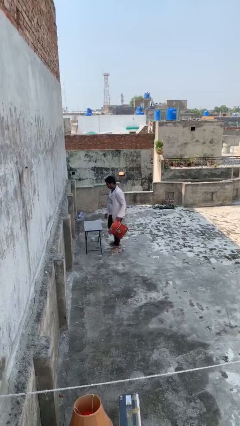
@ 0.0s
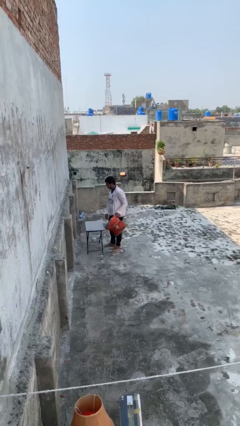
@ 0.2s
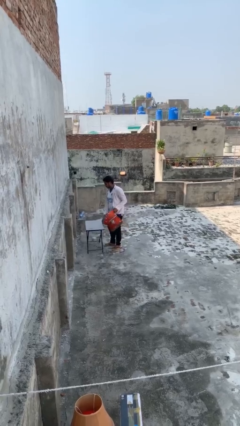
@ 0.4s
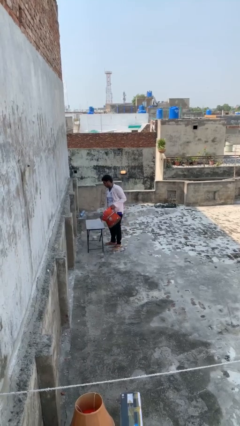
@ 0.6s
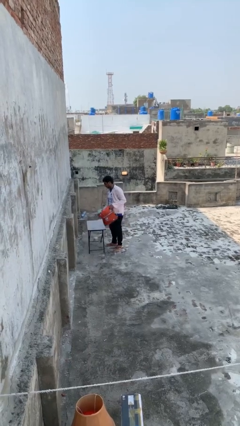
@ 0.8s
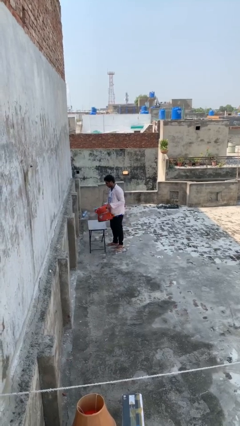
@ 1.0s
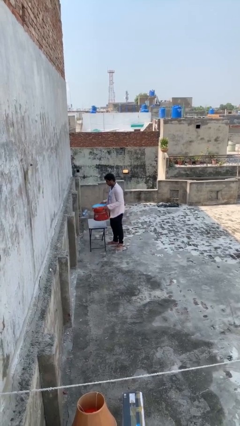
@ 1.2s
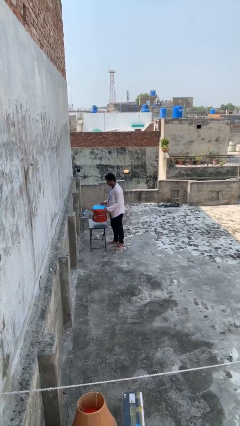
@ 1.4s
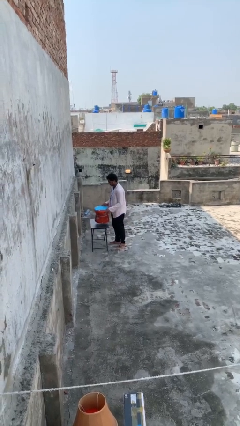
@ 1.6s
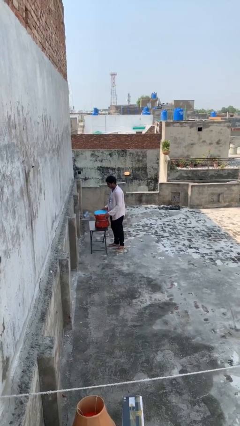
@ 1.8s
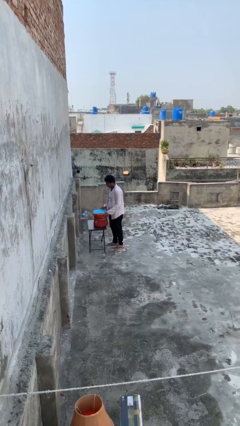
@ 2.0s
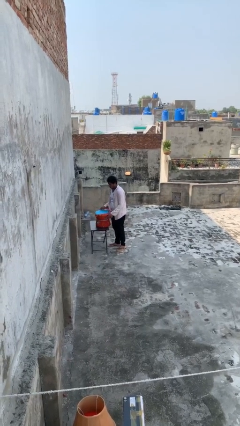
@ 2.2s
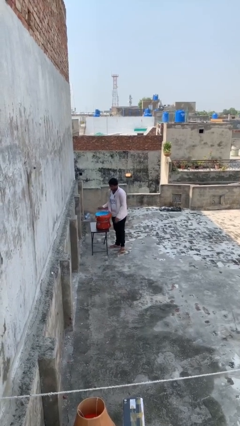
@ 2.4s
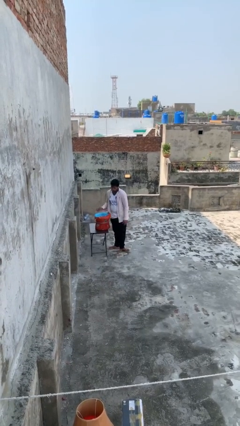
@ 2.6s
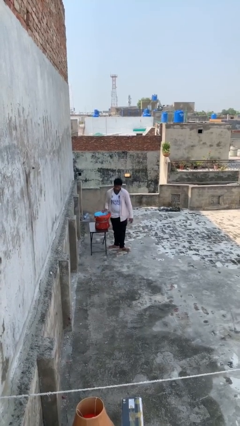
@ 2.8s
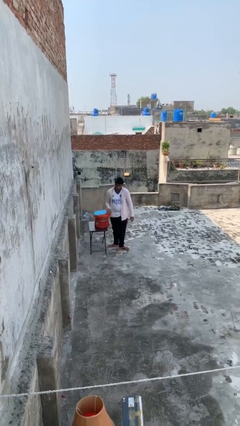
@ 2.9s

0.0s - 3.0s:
person puts down object on table

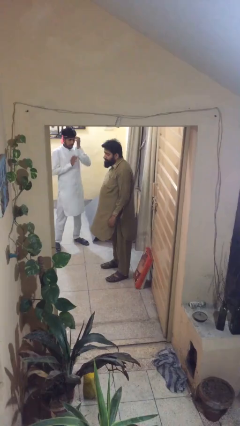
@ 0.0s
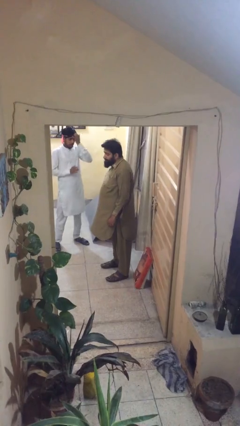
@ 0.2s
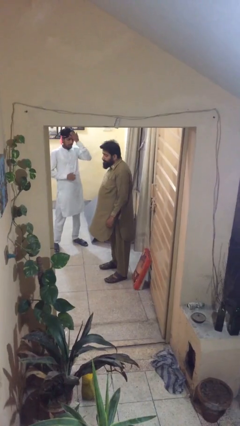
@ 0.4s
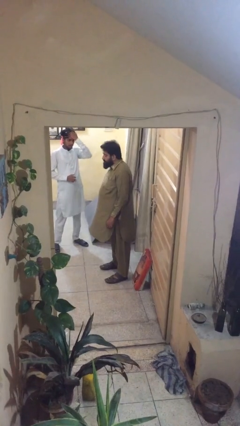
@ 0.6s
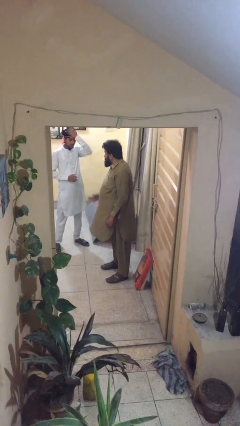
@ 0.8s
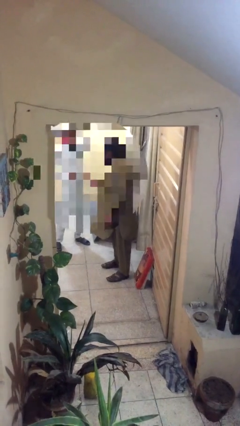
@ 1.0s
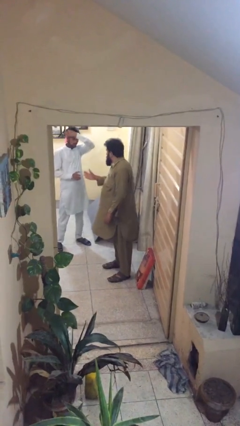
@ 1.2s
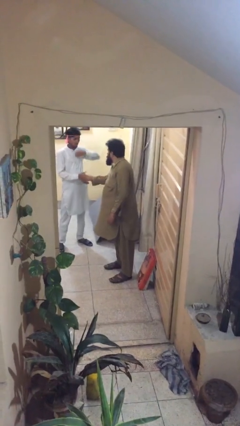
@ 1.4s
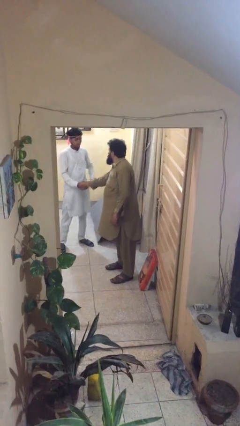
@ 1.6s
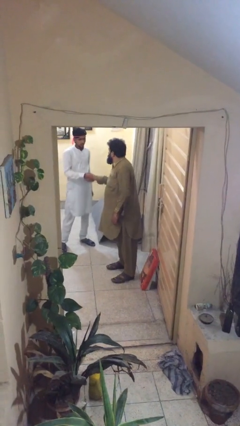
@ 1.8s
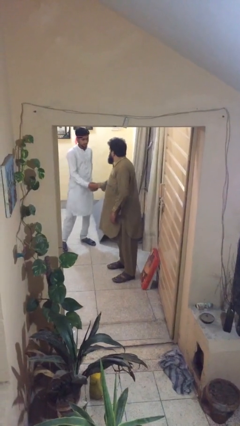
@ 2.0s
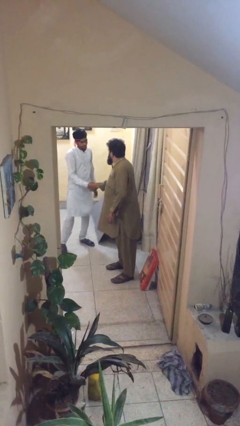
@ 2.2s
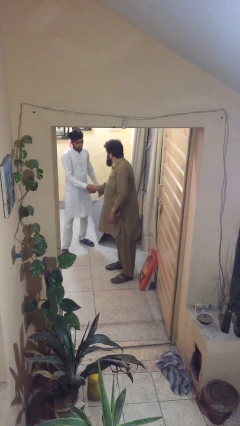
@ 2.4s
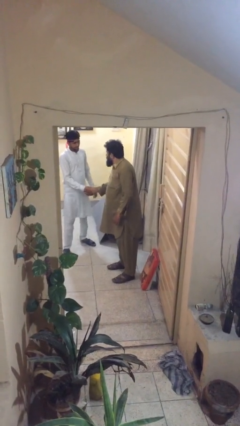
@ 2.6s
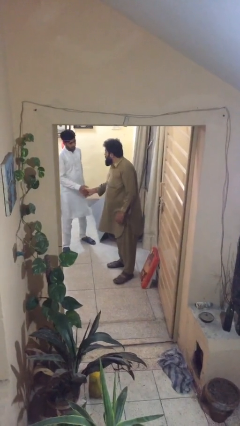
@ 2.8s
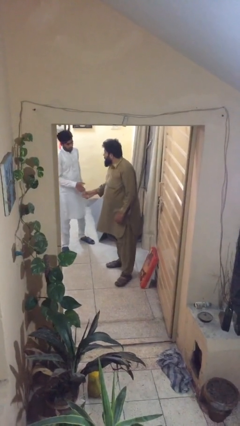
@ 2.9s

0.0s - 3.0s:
person shakes hand

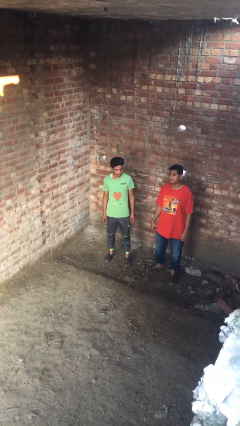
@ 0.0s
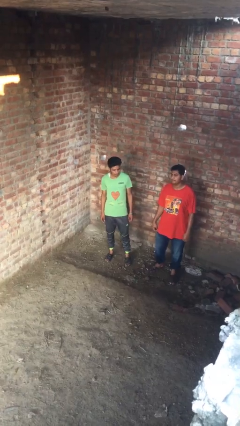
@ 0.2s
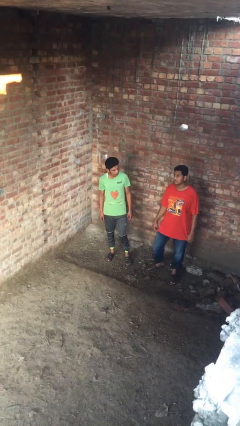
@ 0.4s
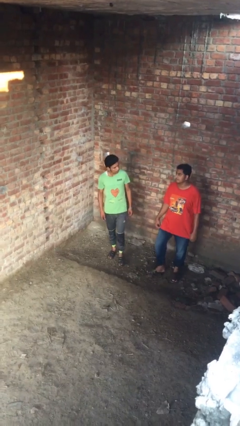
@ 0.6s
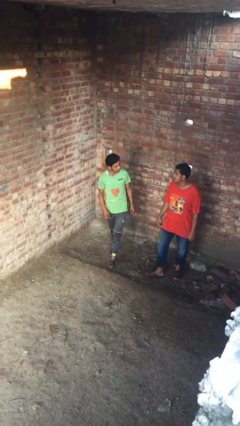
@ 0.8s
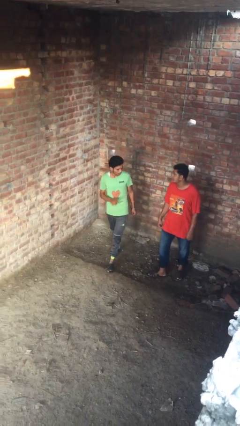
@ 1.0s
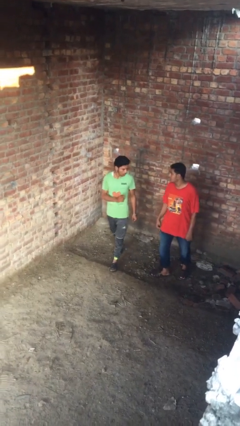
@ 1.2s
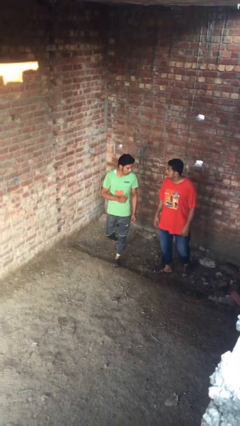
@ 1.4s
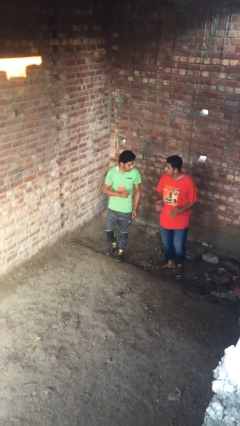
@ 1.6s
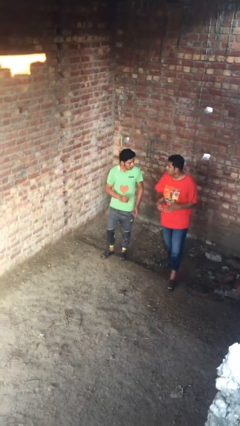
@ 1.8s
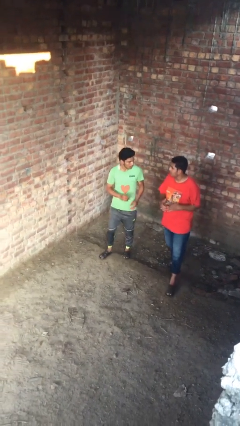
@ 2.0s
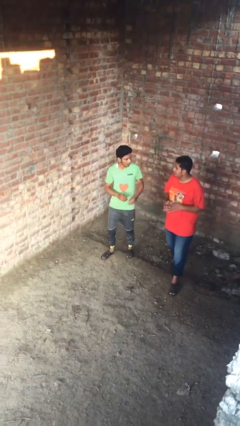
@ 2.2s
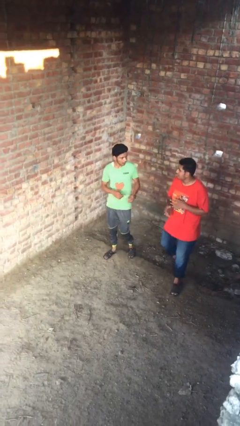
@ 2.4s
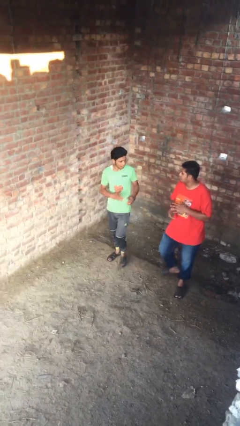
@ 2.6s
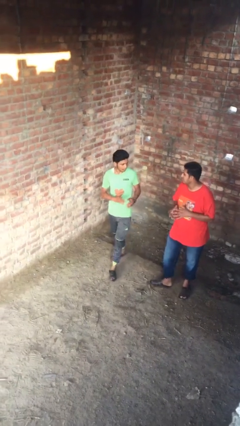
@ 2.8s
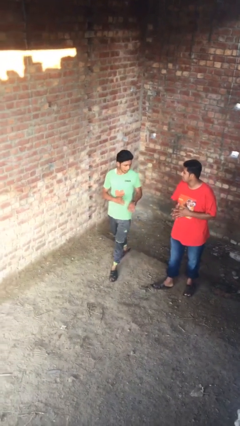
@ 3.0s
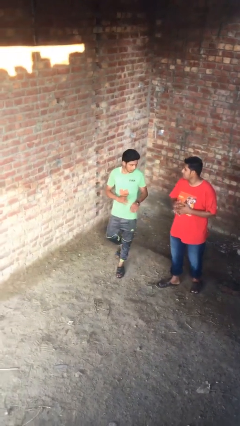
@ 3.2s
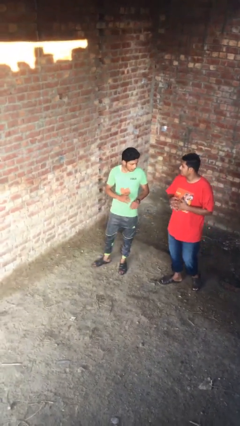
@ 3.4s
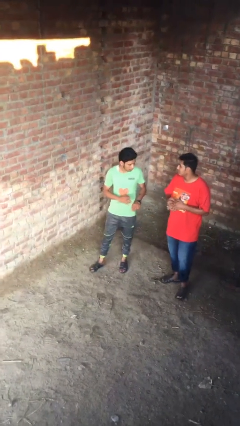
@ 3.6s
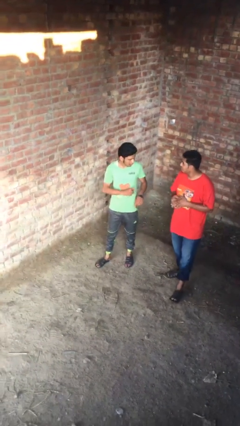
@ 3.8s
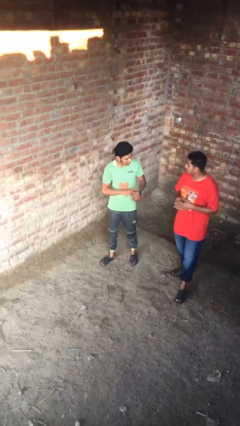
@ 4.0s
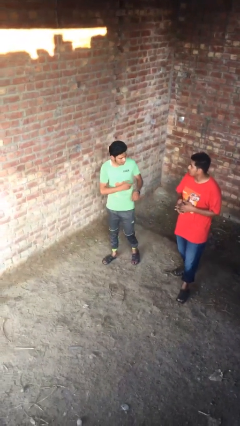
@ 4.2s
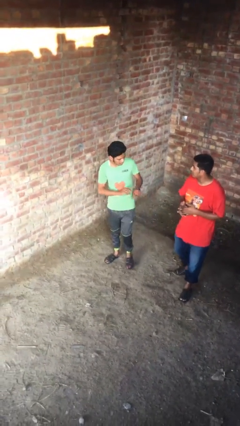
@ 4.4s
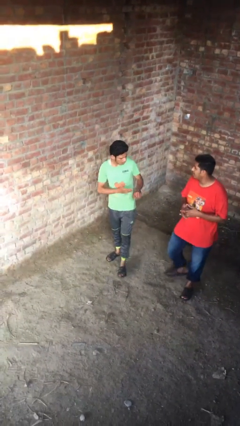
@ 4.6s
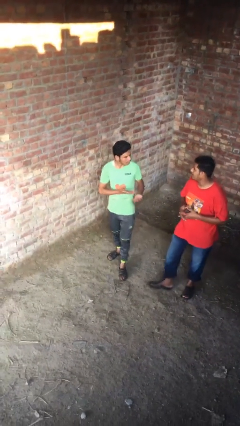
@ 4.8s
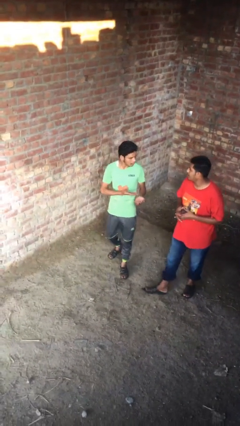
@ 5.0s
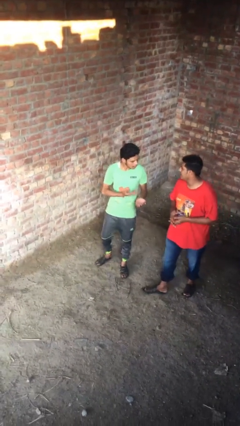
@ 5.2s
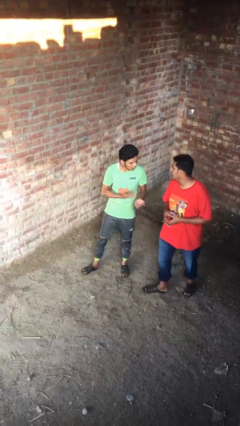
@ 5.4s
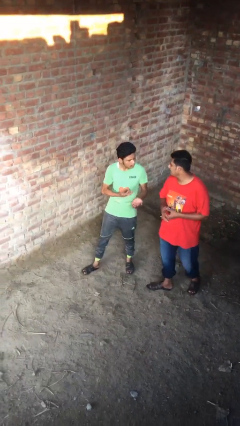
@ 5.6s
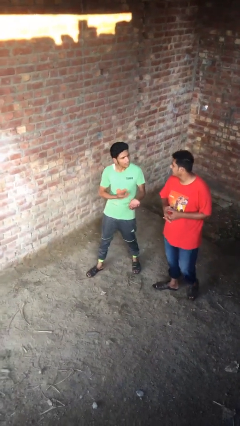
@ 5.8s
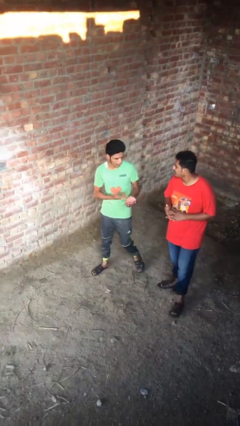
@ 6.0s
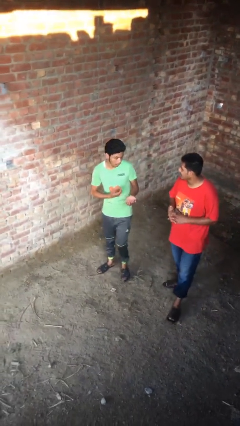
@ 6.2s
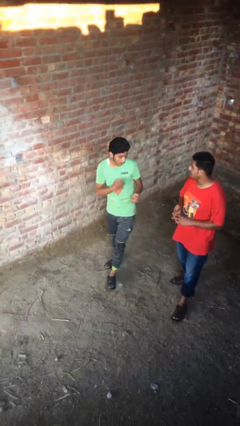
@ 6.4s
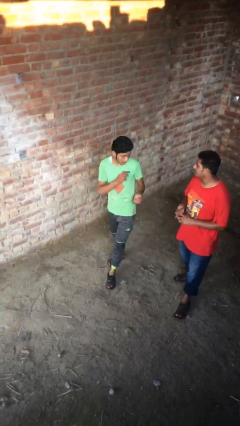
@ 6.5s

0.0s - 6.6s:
person talks to person

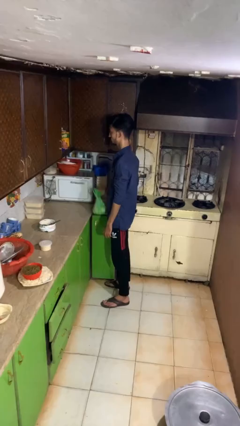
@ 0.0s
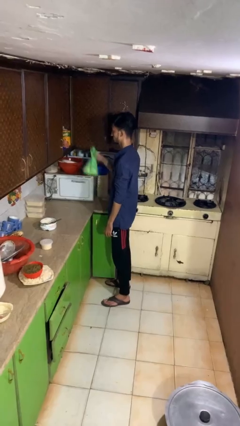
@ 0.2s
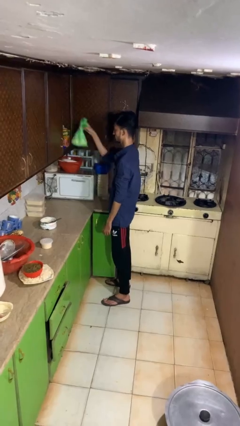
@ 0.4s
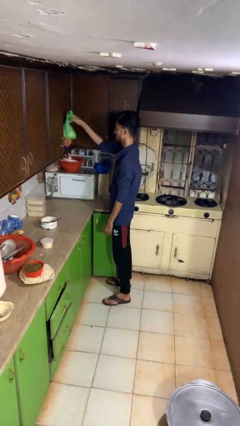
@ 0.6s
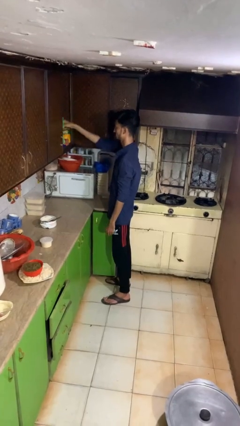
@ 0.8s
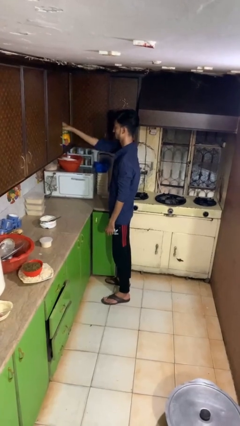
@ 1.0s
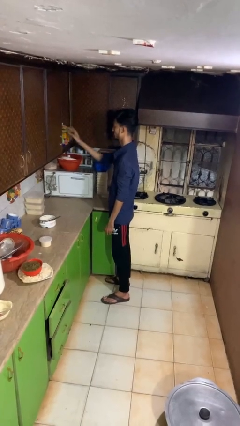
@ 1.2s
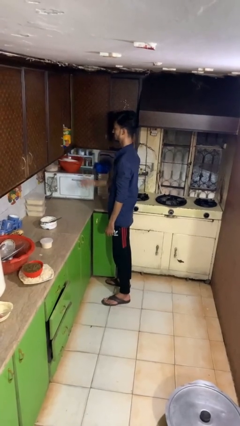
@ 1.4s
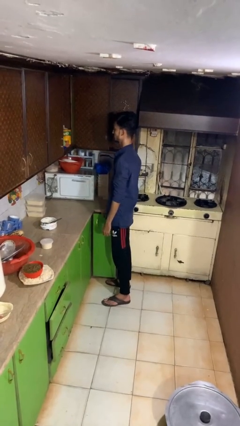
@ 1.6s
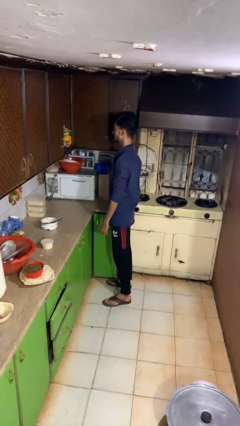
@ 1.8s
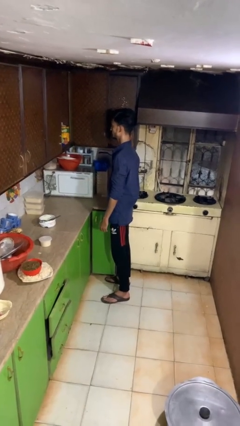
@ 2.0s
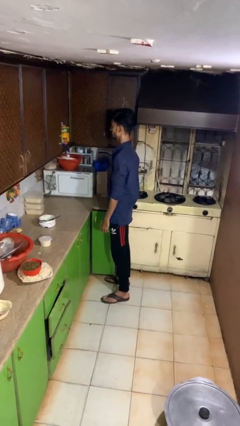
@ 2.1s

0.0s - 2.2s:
person loads groceries into cabinet

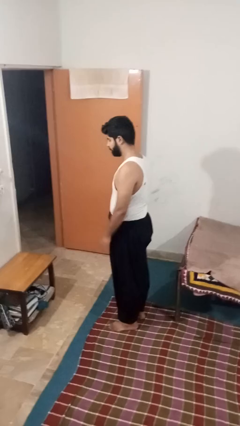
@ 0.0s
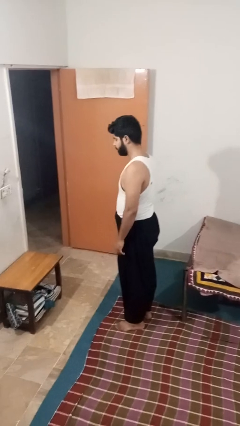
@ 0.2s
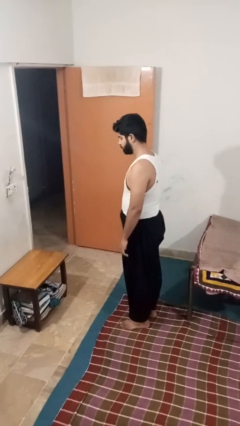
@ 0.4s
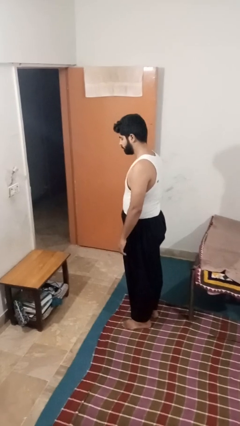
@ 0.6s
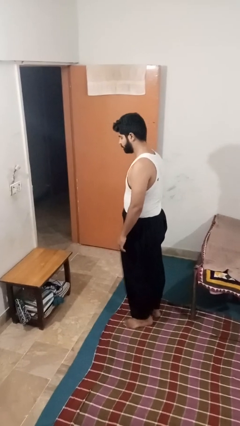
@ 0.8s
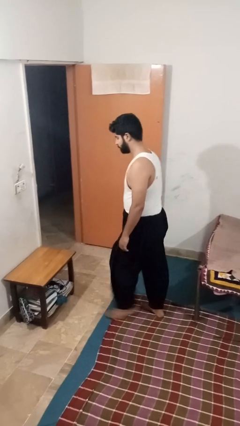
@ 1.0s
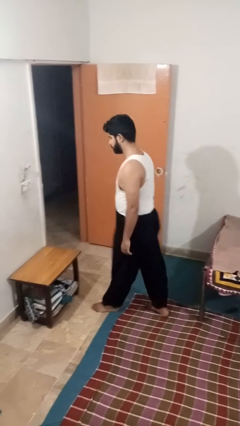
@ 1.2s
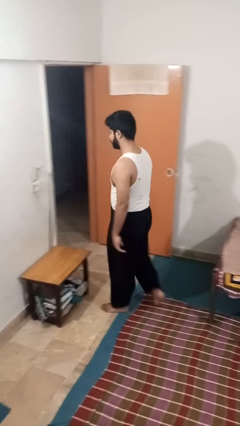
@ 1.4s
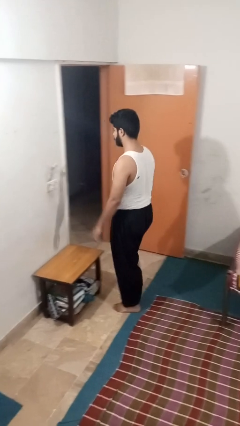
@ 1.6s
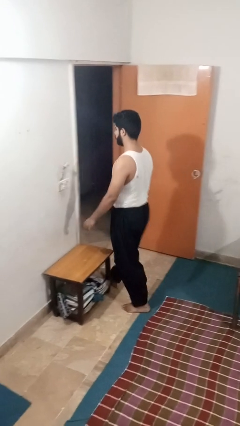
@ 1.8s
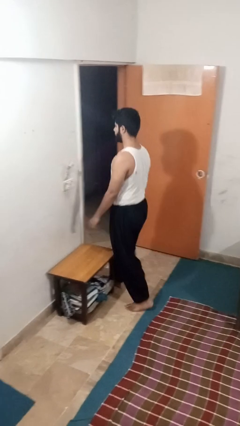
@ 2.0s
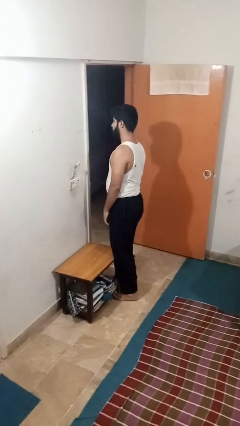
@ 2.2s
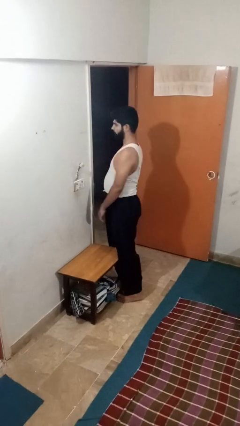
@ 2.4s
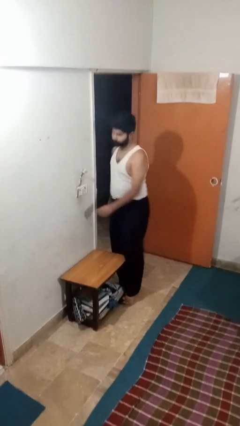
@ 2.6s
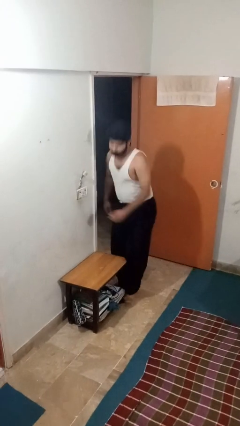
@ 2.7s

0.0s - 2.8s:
person bumps into table
